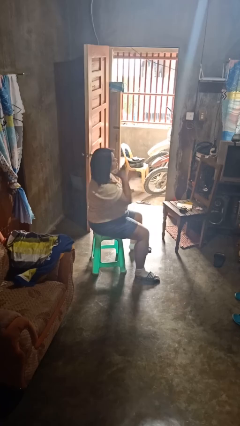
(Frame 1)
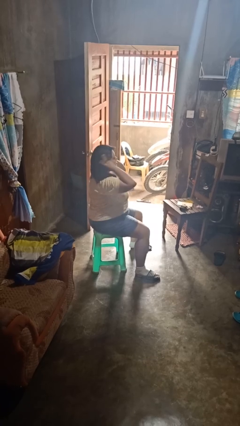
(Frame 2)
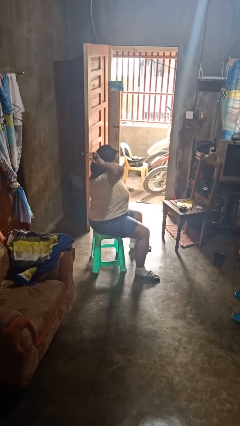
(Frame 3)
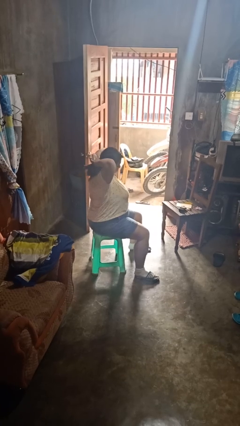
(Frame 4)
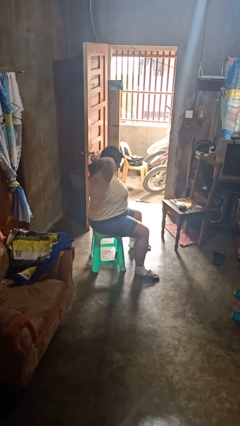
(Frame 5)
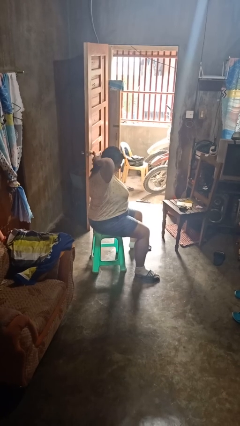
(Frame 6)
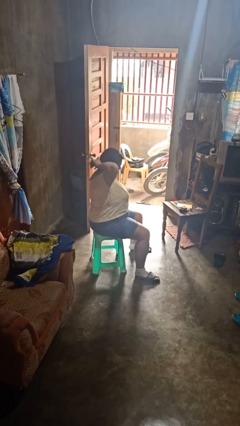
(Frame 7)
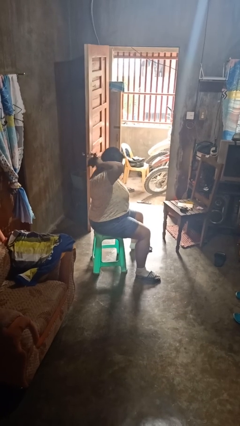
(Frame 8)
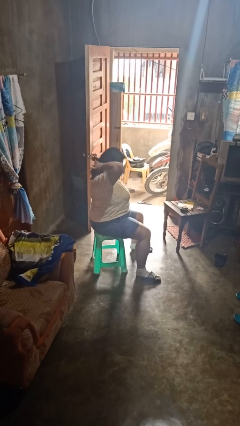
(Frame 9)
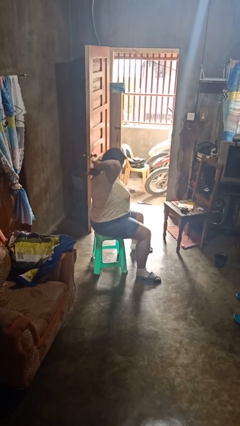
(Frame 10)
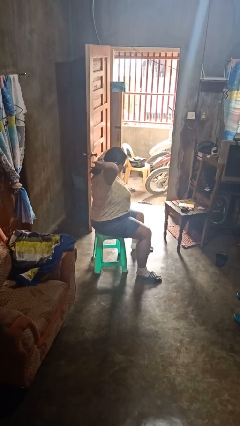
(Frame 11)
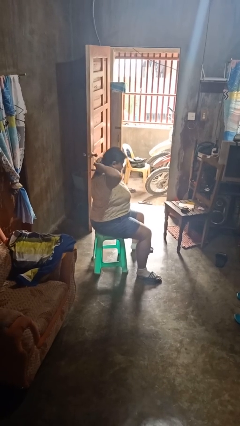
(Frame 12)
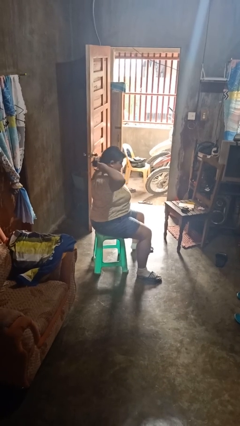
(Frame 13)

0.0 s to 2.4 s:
person puts hair in ponytail

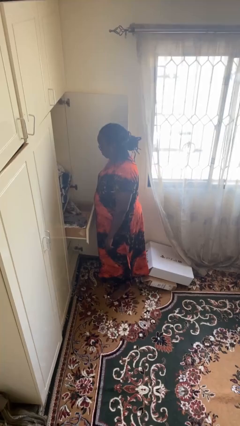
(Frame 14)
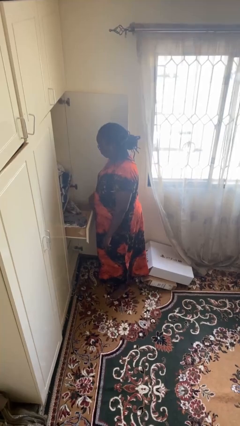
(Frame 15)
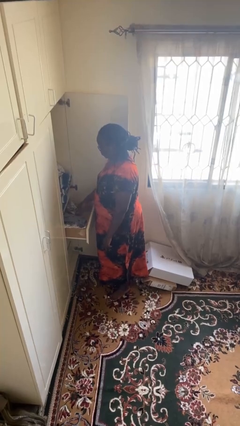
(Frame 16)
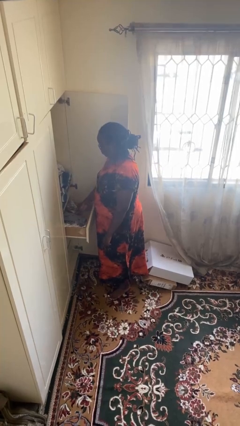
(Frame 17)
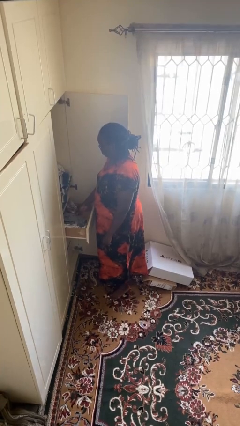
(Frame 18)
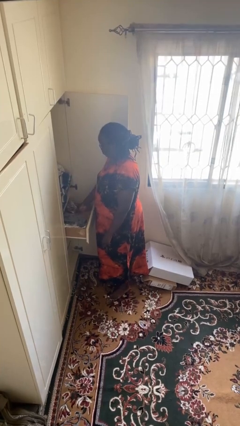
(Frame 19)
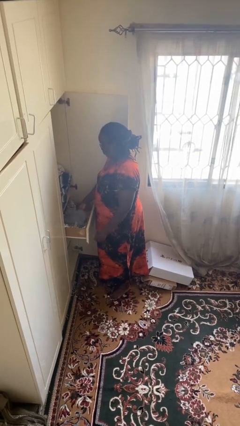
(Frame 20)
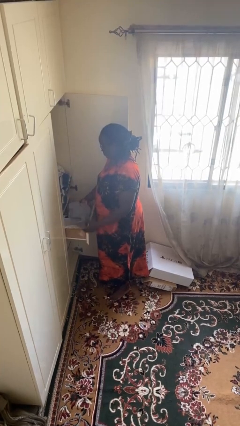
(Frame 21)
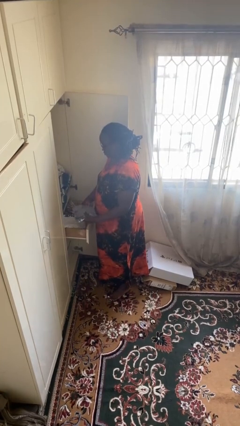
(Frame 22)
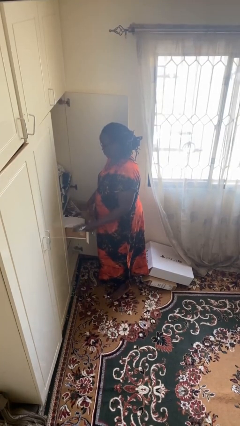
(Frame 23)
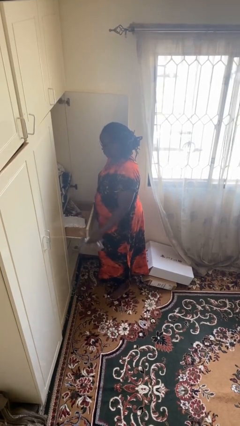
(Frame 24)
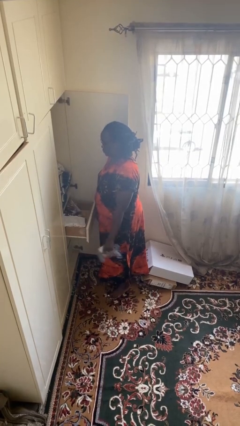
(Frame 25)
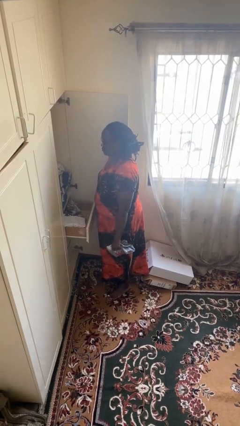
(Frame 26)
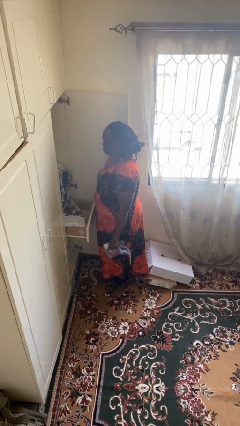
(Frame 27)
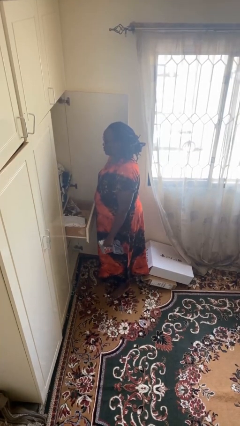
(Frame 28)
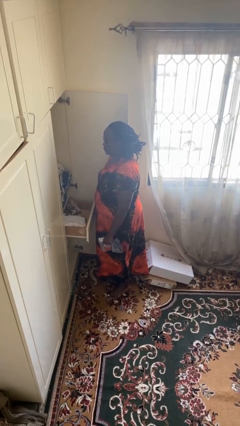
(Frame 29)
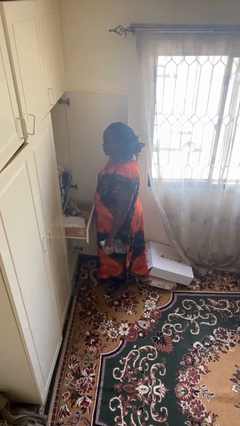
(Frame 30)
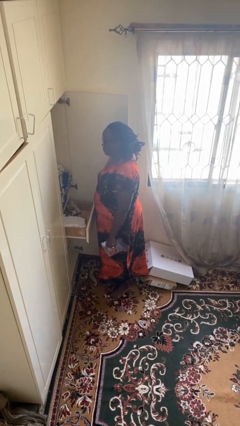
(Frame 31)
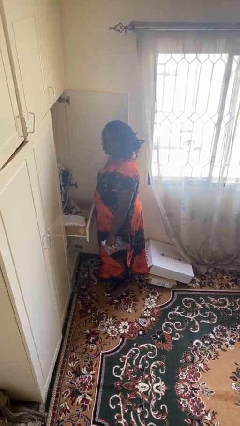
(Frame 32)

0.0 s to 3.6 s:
person takes clothes from dresser

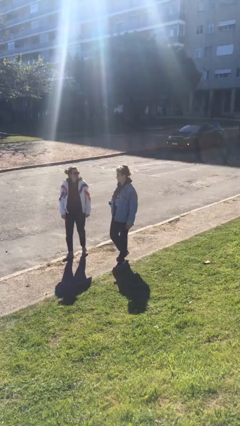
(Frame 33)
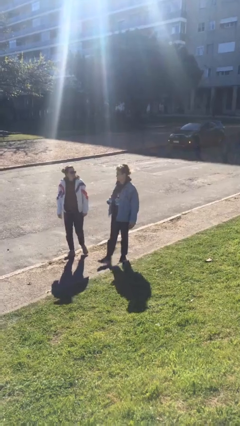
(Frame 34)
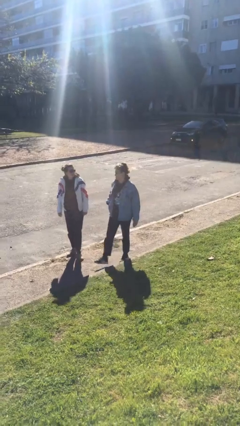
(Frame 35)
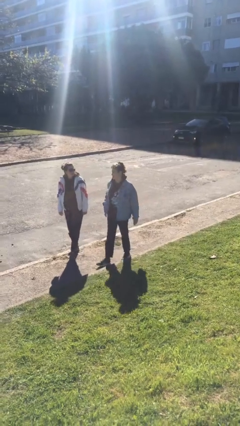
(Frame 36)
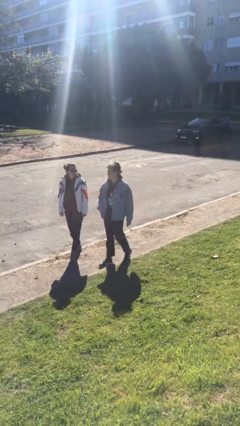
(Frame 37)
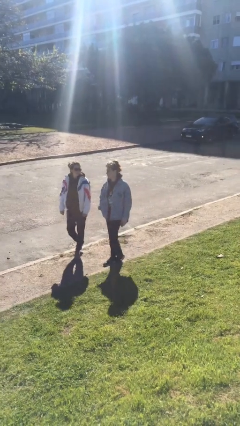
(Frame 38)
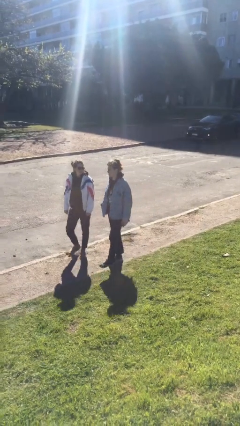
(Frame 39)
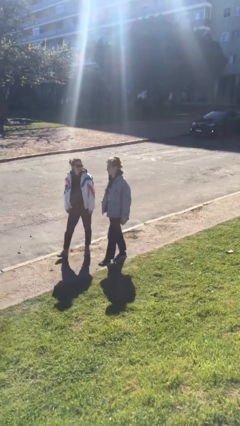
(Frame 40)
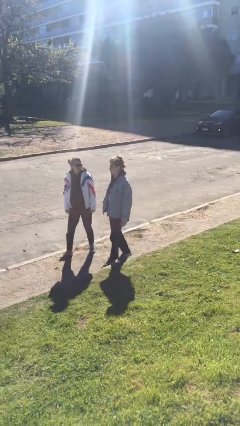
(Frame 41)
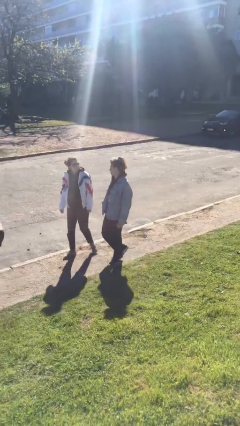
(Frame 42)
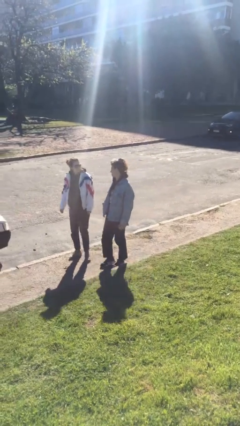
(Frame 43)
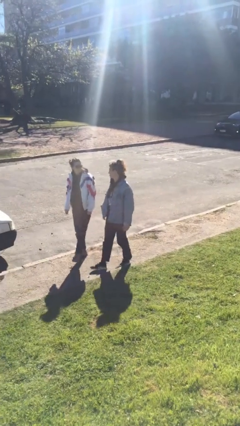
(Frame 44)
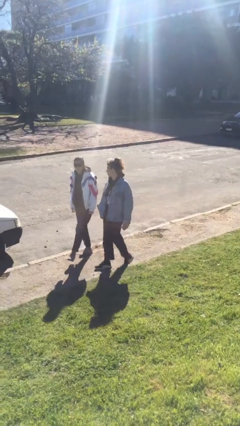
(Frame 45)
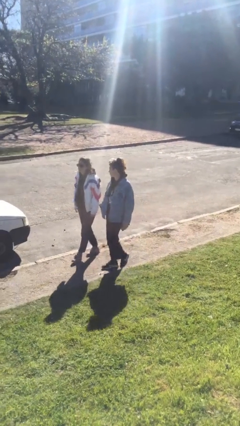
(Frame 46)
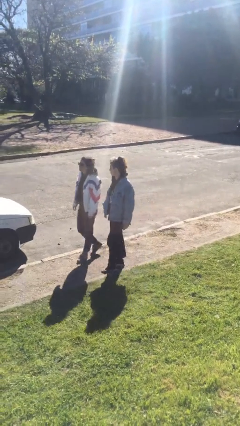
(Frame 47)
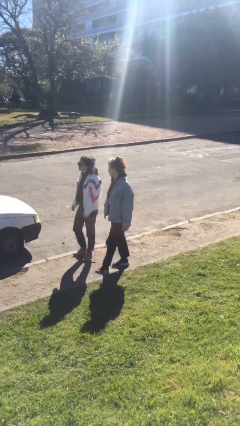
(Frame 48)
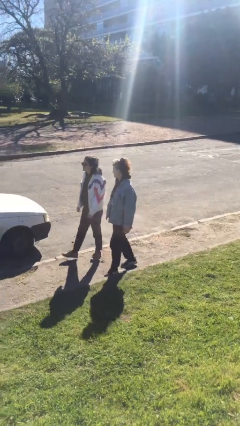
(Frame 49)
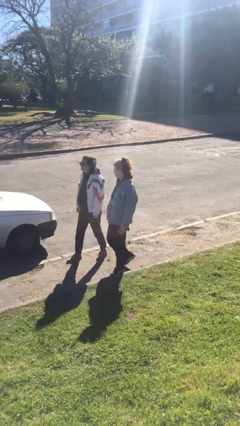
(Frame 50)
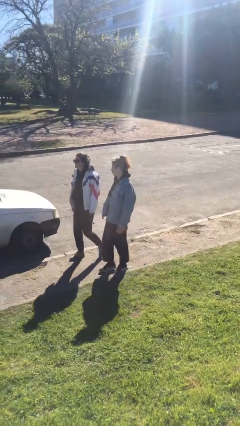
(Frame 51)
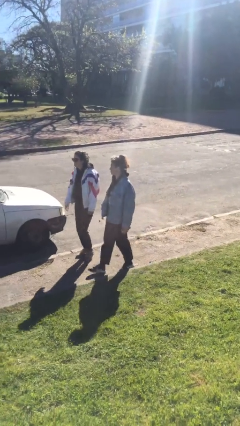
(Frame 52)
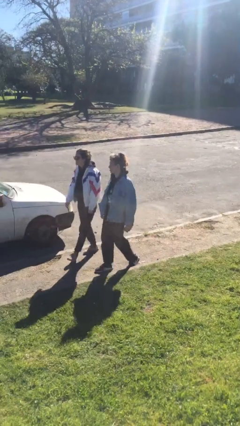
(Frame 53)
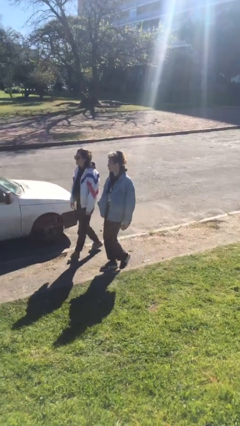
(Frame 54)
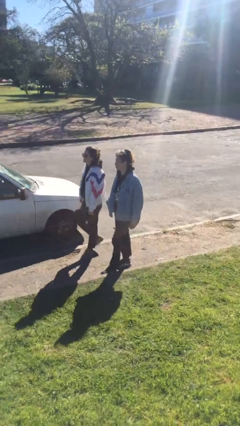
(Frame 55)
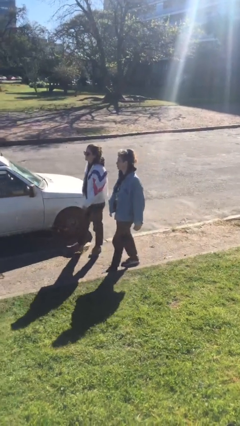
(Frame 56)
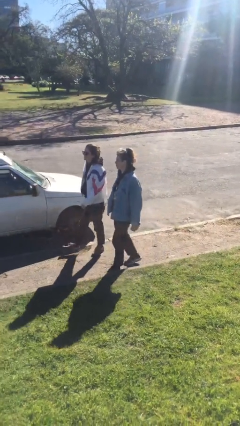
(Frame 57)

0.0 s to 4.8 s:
person talks to person

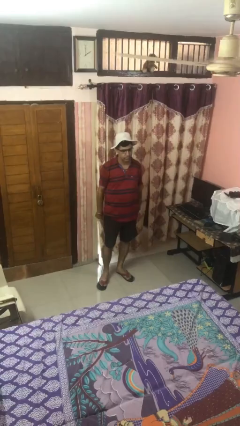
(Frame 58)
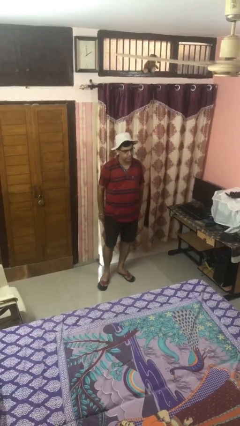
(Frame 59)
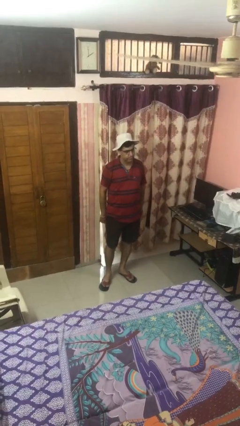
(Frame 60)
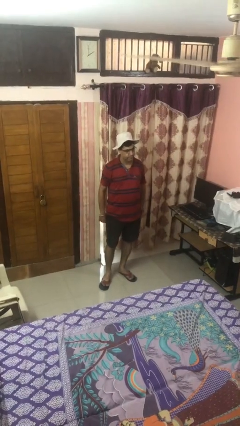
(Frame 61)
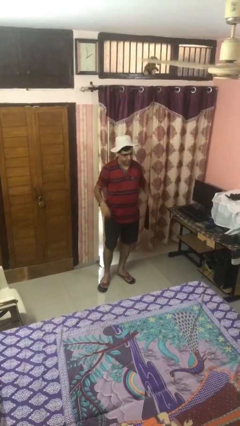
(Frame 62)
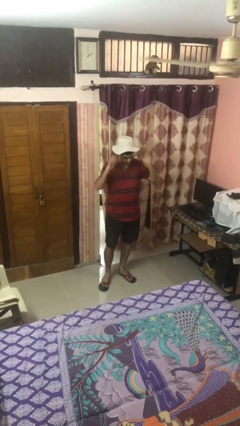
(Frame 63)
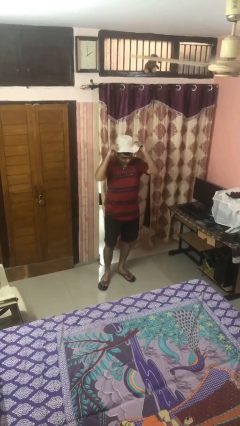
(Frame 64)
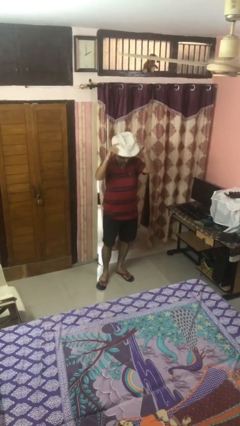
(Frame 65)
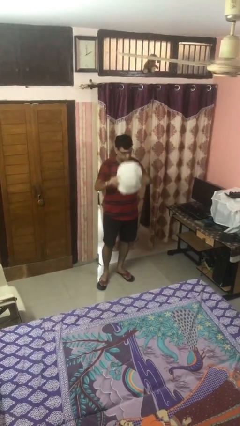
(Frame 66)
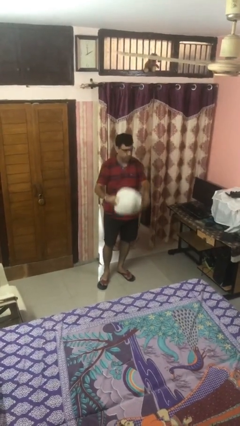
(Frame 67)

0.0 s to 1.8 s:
person takes off hat

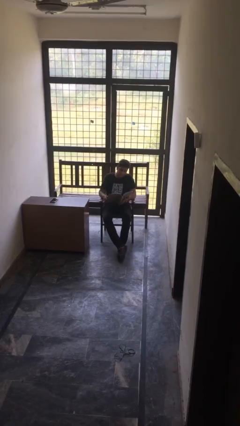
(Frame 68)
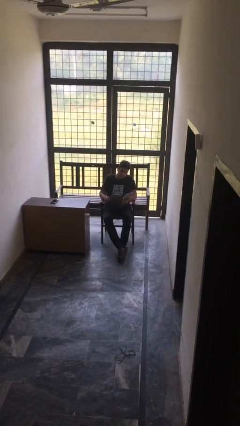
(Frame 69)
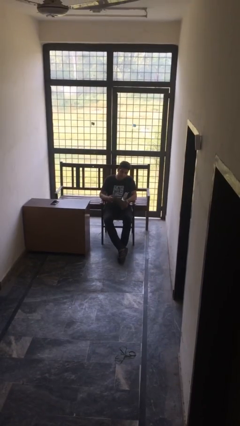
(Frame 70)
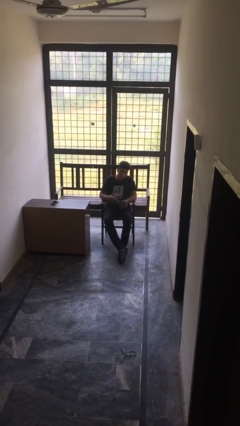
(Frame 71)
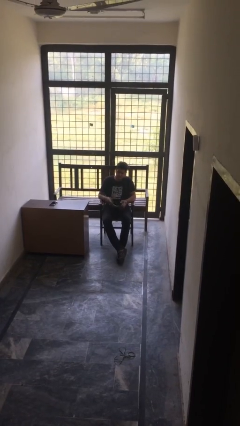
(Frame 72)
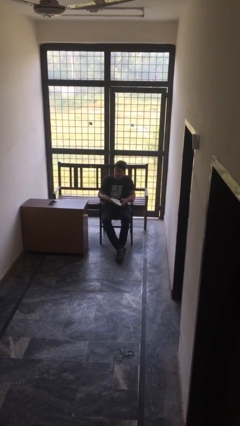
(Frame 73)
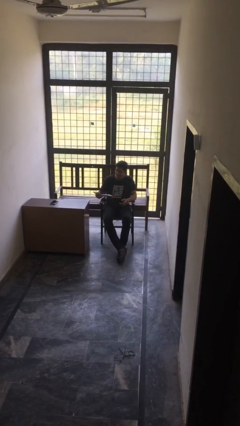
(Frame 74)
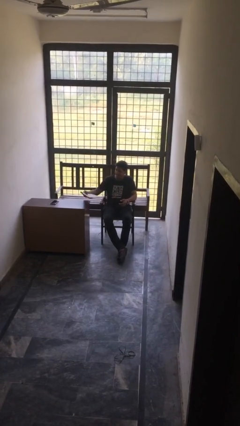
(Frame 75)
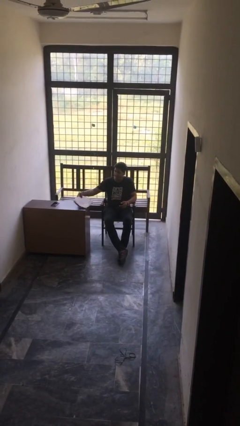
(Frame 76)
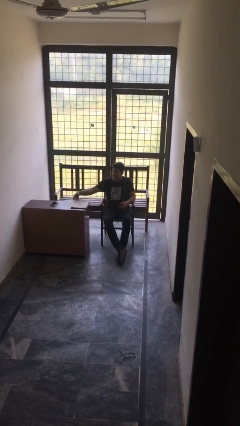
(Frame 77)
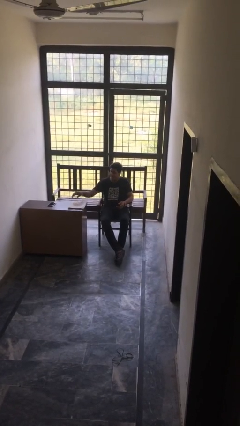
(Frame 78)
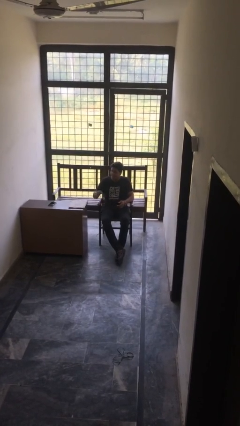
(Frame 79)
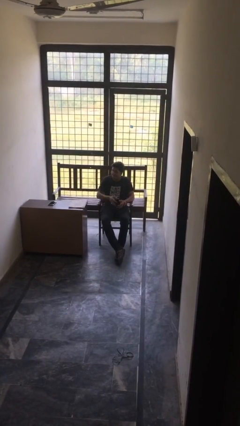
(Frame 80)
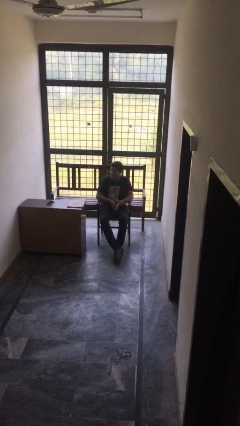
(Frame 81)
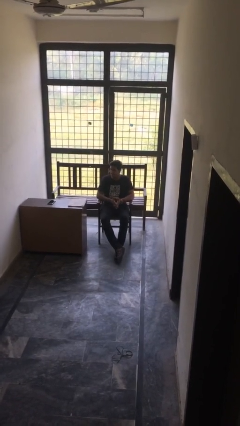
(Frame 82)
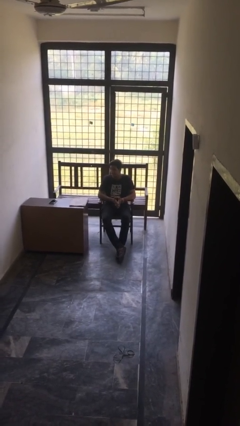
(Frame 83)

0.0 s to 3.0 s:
person puts down object on table

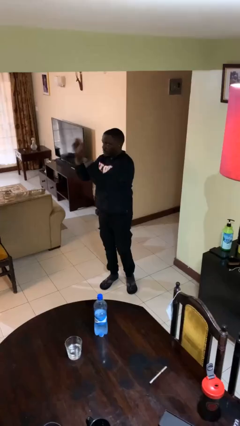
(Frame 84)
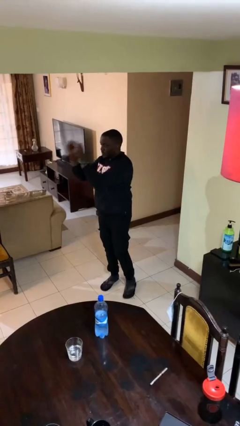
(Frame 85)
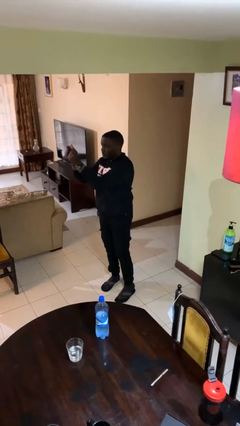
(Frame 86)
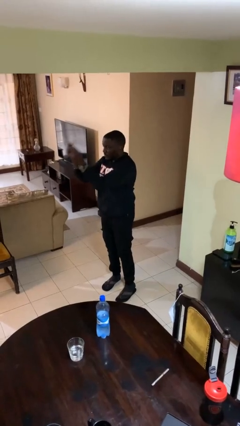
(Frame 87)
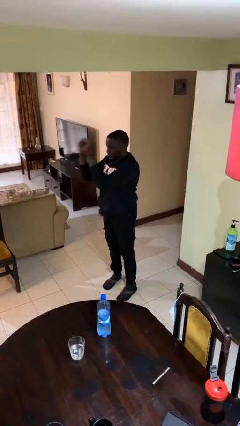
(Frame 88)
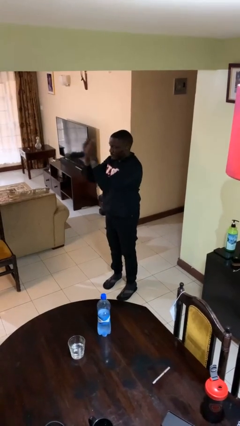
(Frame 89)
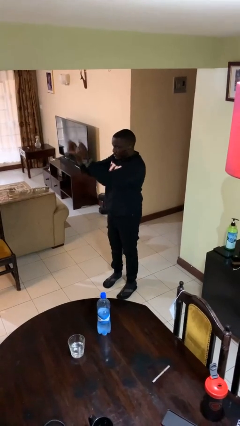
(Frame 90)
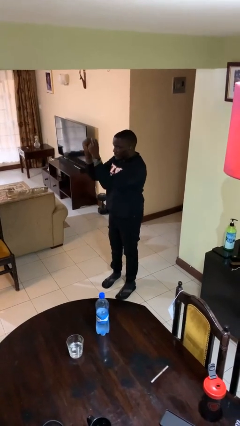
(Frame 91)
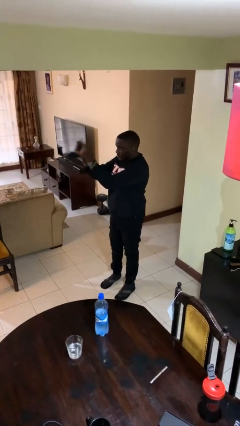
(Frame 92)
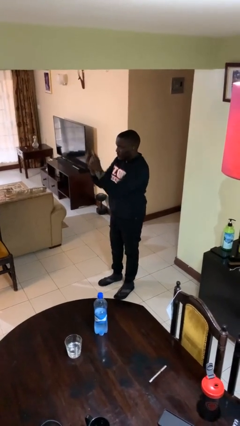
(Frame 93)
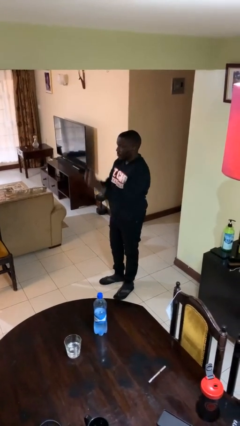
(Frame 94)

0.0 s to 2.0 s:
person snaps fingers
